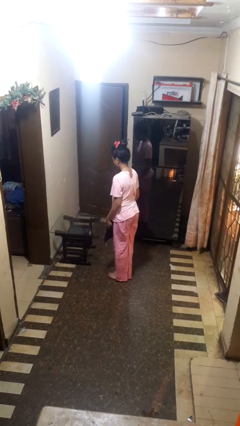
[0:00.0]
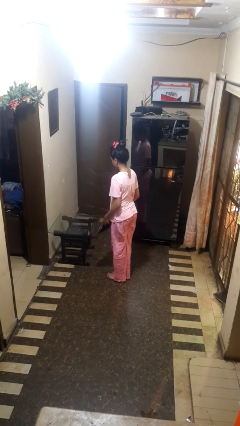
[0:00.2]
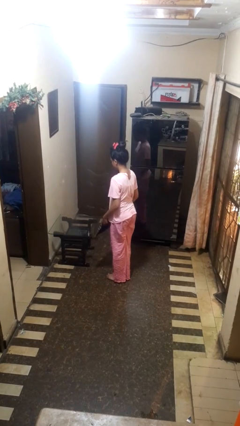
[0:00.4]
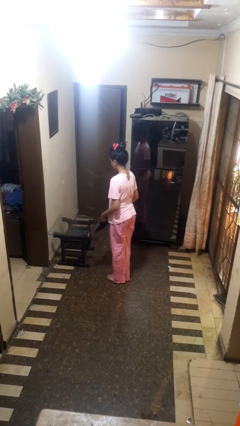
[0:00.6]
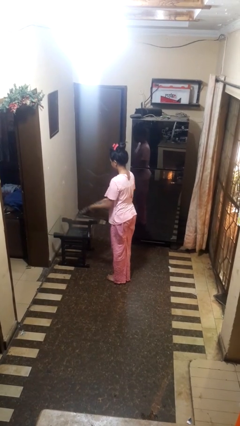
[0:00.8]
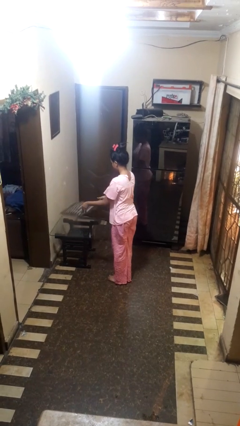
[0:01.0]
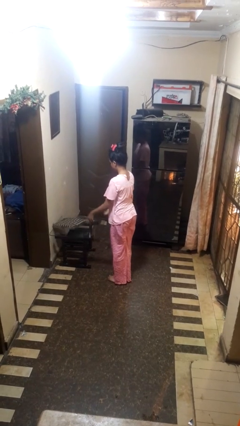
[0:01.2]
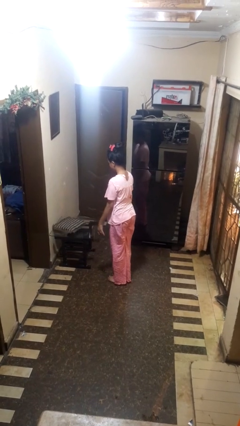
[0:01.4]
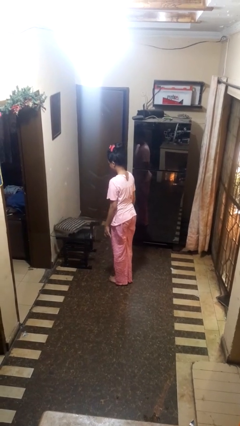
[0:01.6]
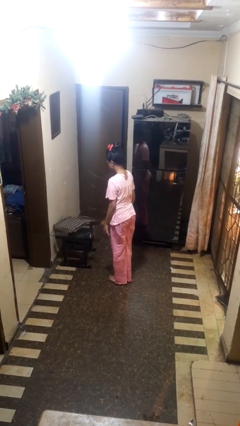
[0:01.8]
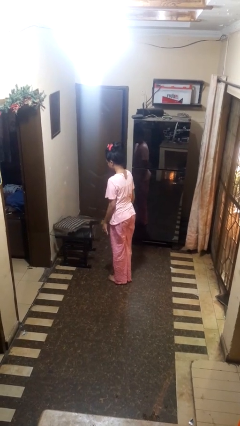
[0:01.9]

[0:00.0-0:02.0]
person throws object on table

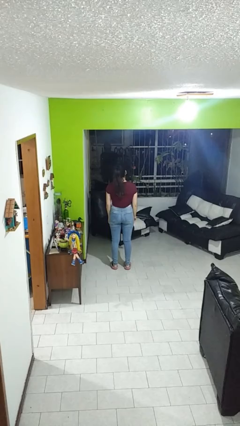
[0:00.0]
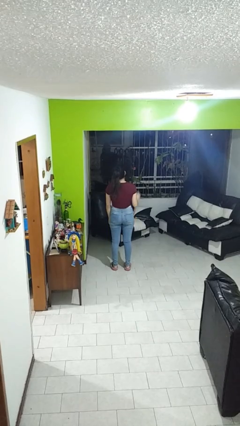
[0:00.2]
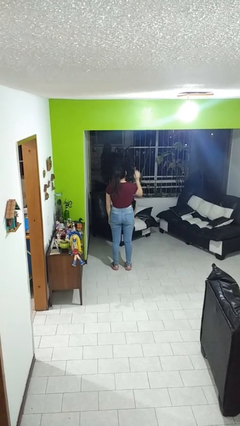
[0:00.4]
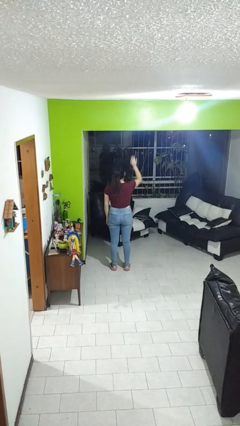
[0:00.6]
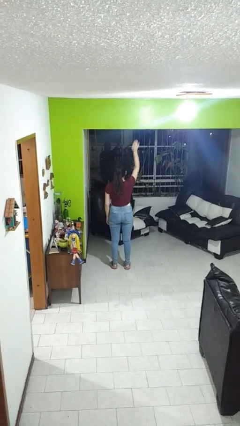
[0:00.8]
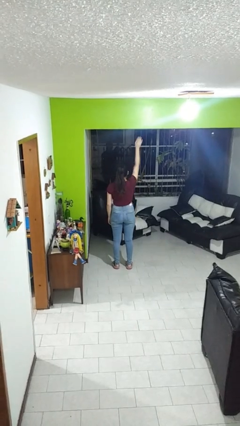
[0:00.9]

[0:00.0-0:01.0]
person gestures raise hand

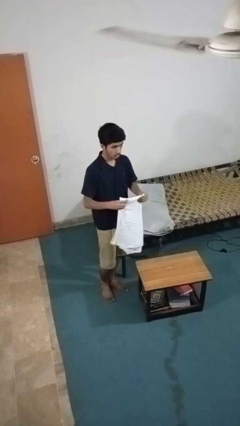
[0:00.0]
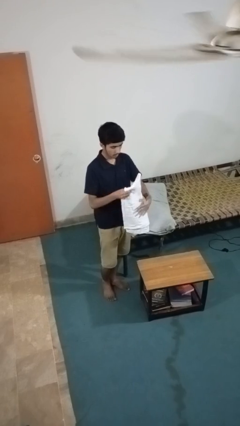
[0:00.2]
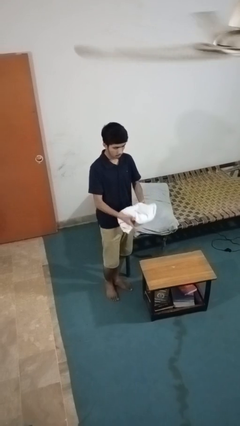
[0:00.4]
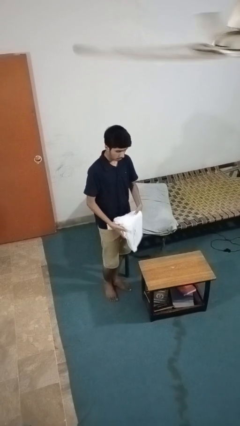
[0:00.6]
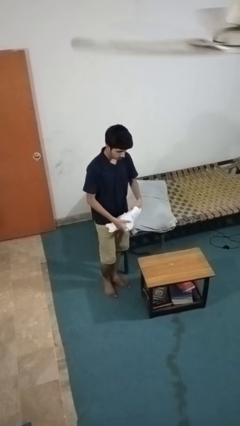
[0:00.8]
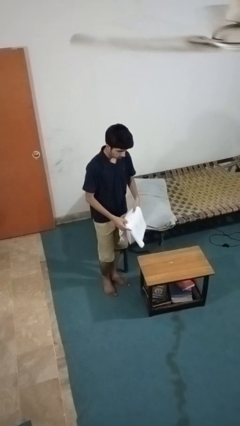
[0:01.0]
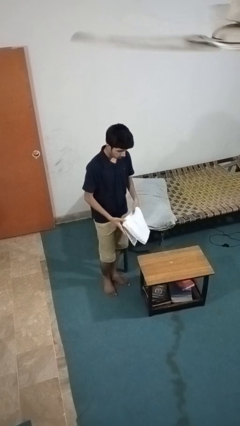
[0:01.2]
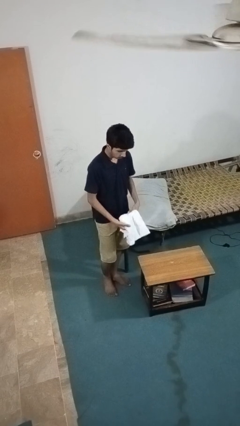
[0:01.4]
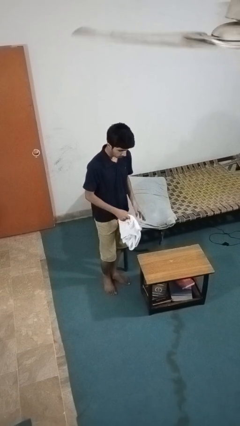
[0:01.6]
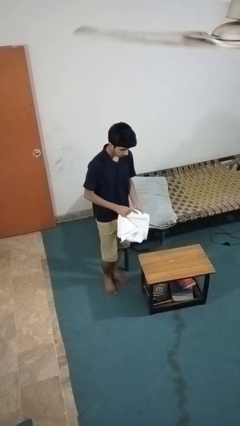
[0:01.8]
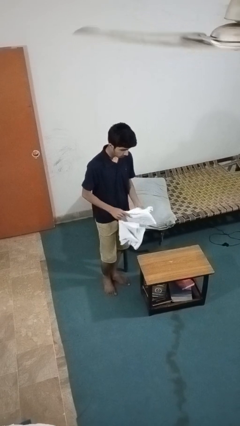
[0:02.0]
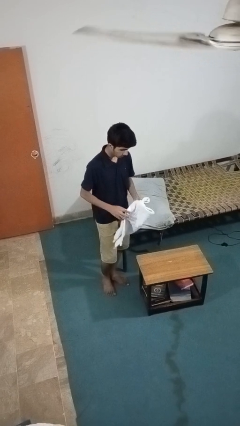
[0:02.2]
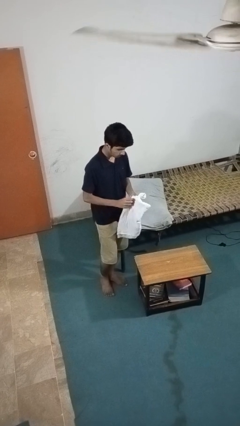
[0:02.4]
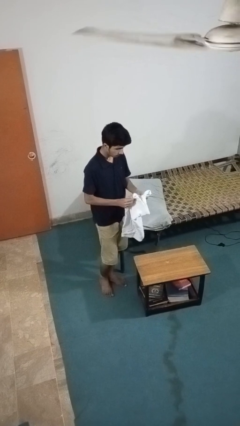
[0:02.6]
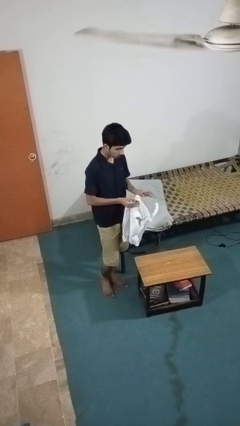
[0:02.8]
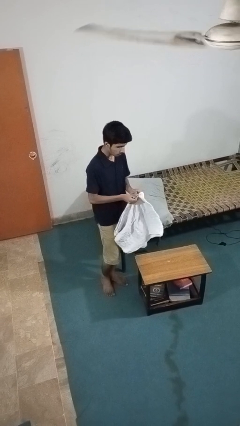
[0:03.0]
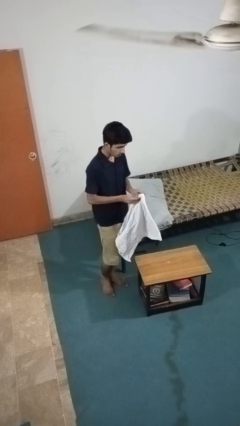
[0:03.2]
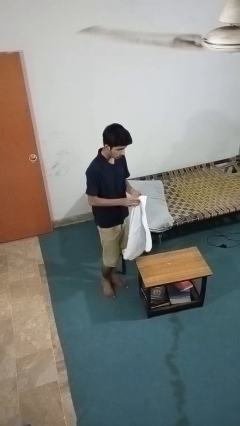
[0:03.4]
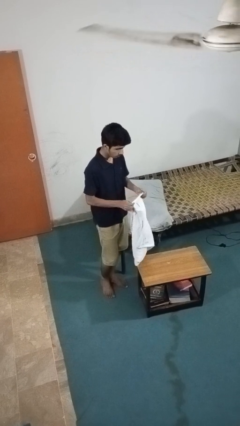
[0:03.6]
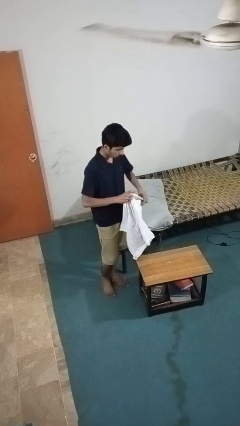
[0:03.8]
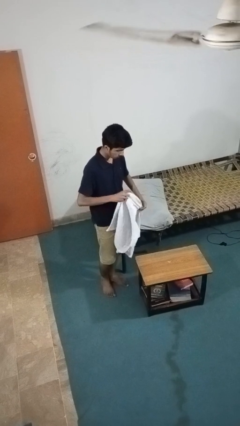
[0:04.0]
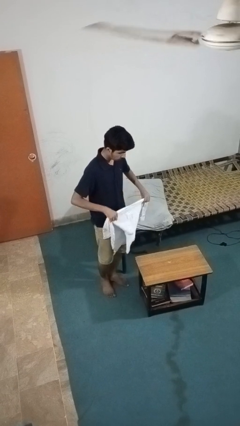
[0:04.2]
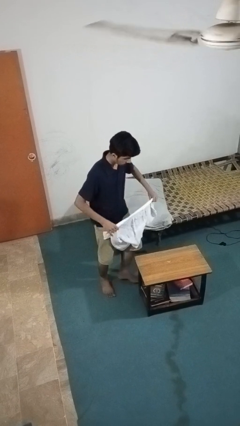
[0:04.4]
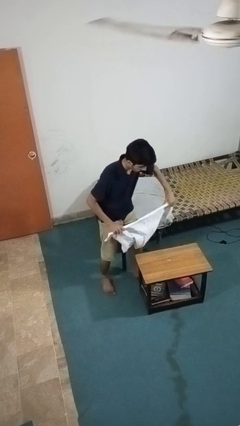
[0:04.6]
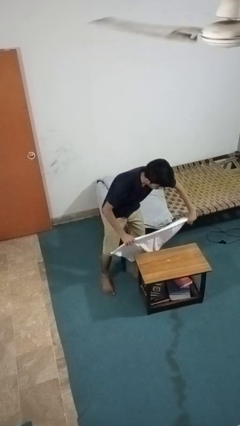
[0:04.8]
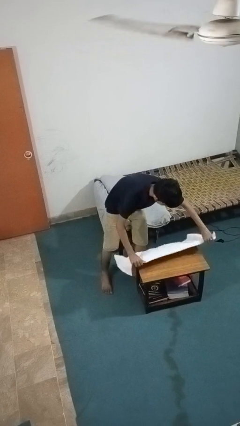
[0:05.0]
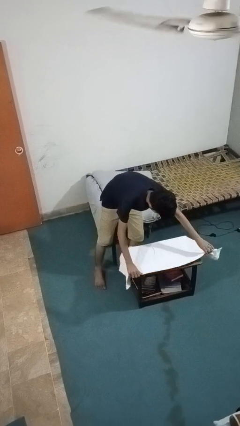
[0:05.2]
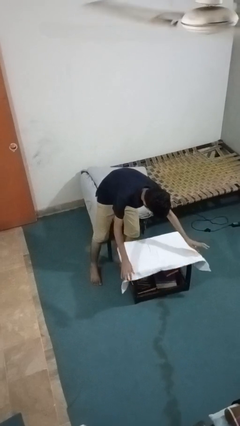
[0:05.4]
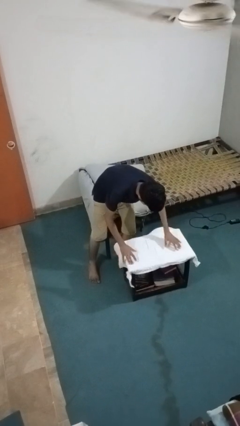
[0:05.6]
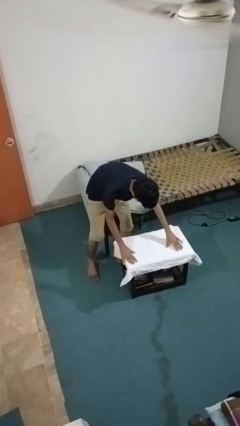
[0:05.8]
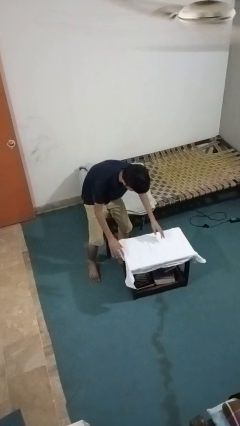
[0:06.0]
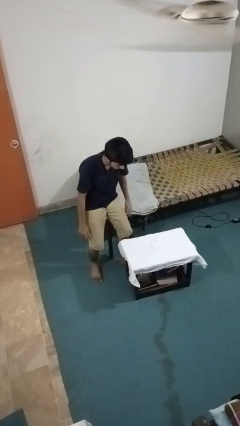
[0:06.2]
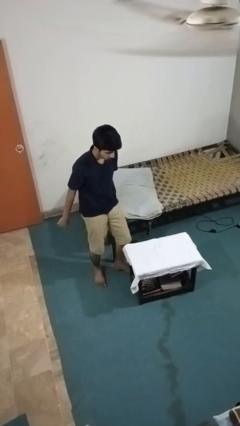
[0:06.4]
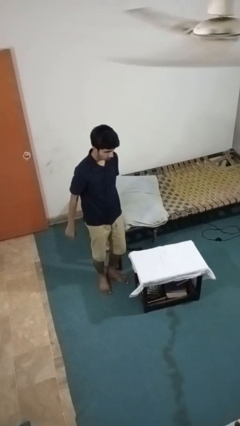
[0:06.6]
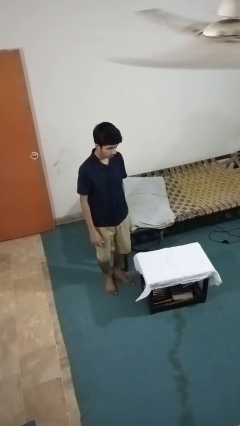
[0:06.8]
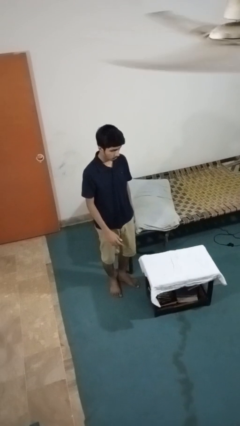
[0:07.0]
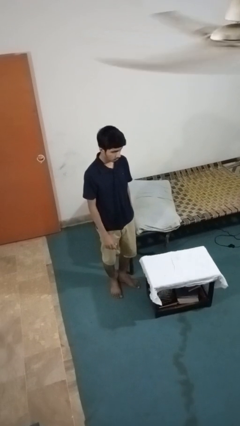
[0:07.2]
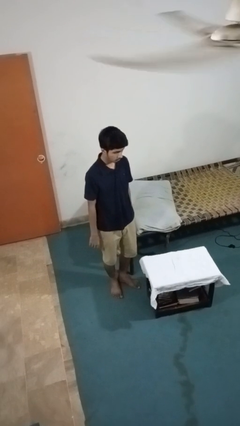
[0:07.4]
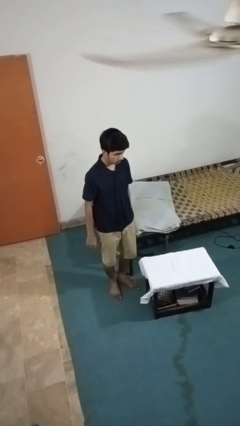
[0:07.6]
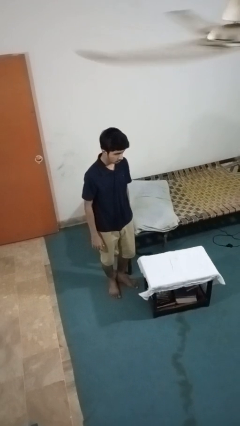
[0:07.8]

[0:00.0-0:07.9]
person spreads tablecloth

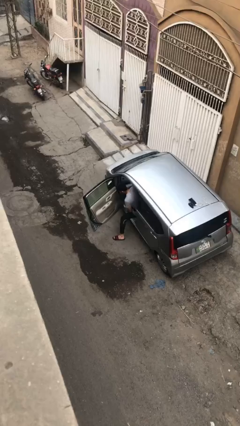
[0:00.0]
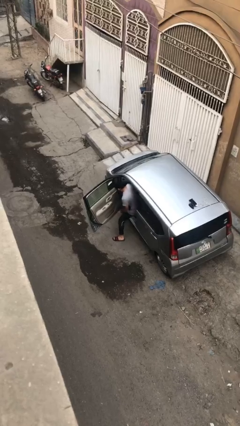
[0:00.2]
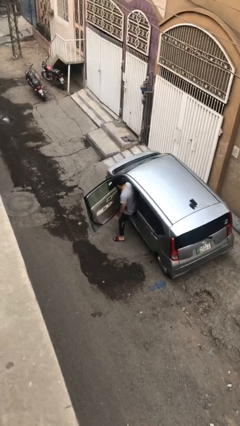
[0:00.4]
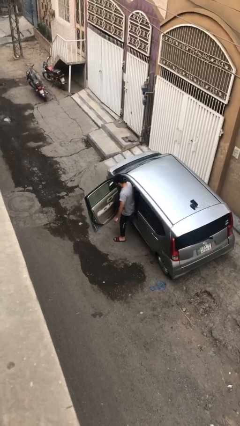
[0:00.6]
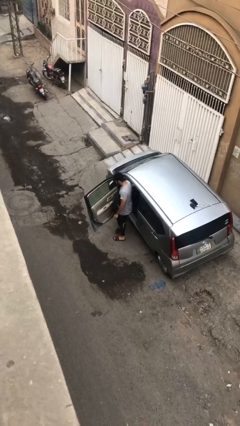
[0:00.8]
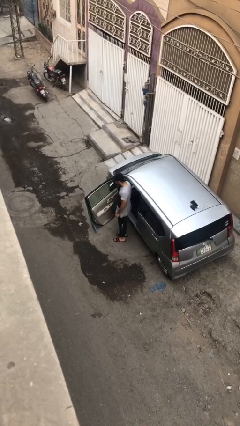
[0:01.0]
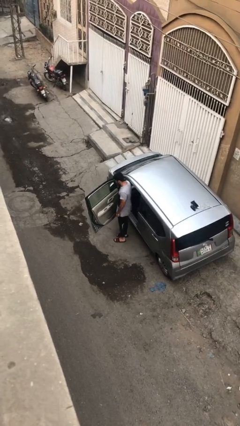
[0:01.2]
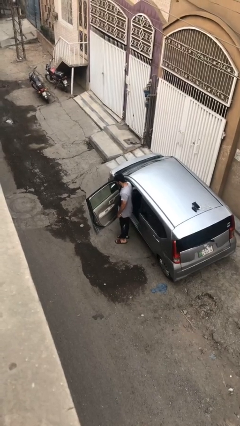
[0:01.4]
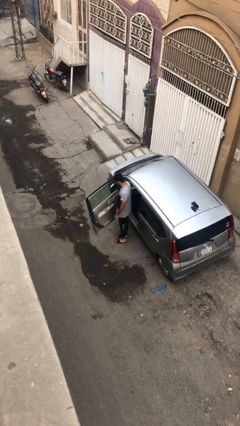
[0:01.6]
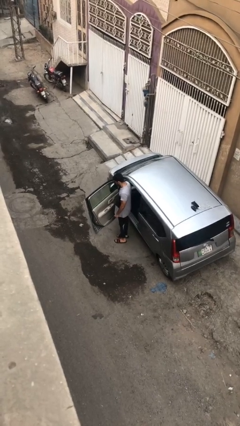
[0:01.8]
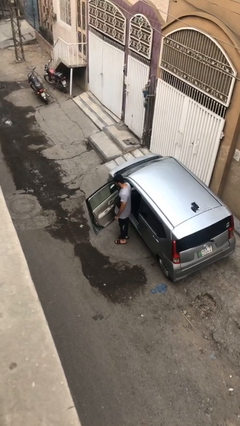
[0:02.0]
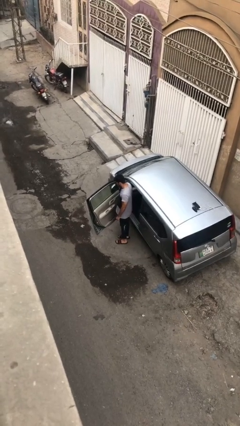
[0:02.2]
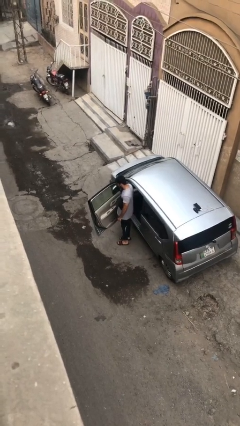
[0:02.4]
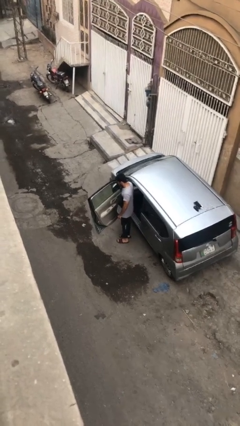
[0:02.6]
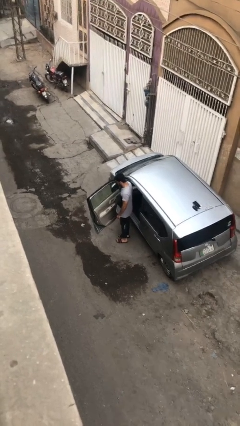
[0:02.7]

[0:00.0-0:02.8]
person exits car

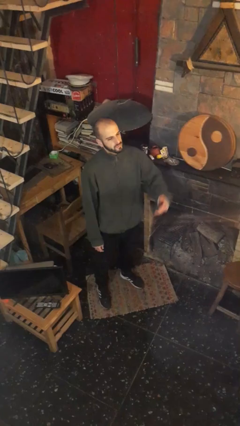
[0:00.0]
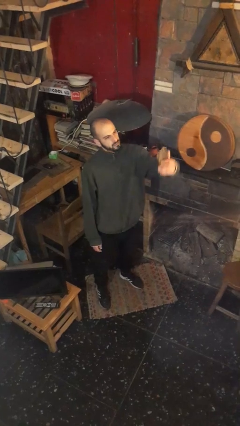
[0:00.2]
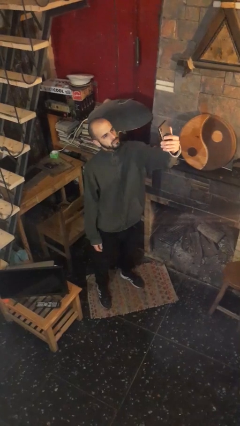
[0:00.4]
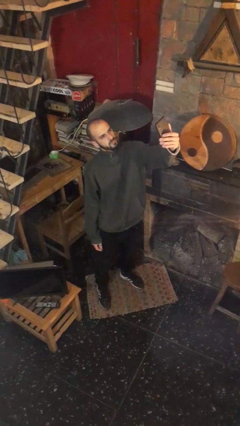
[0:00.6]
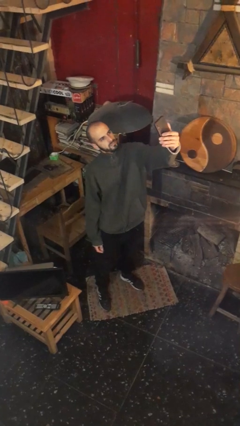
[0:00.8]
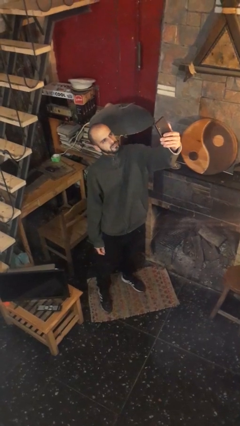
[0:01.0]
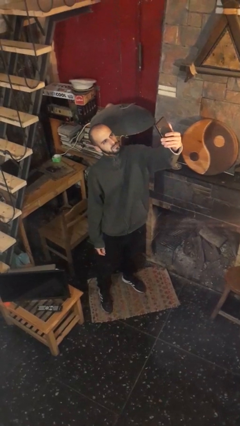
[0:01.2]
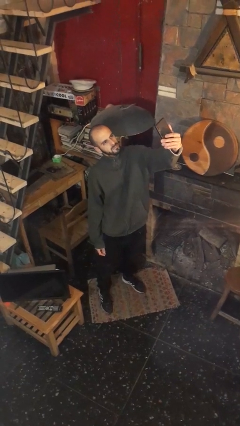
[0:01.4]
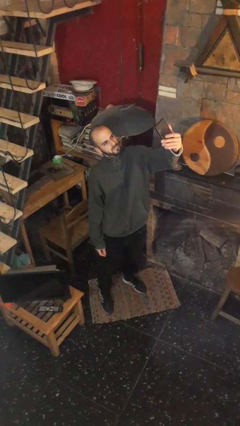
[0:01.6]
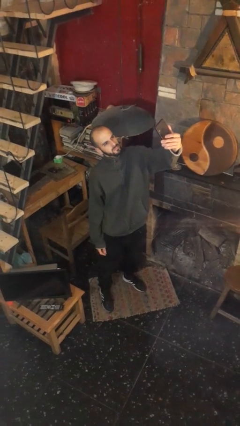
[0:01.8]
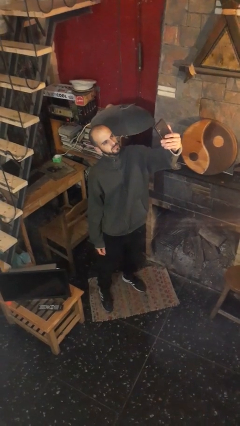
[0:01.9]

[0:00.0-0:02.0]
person takes selfie

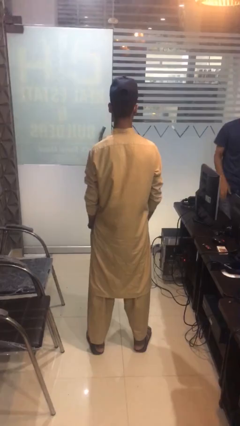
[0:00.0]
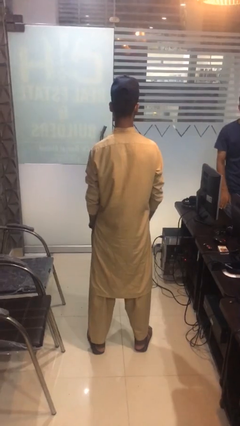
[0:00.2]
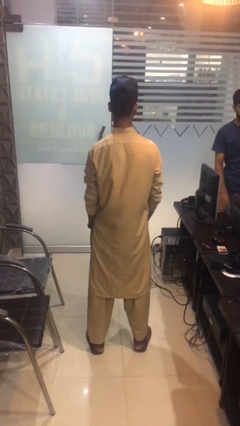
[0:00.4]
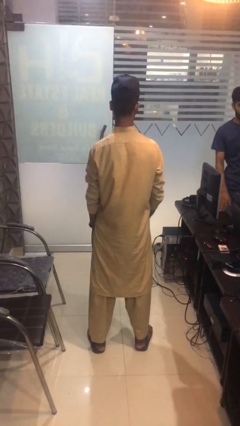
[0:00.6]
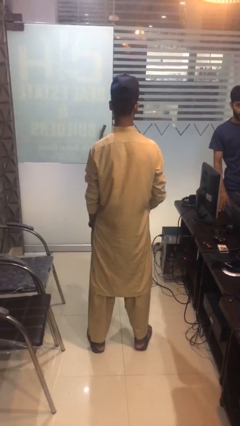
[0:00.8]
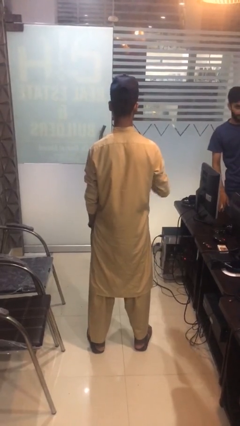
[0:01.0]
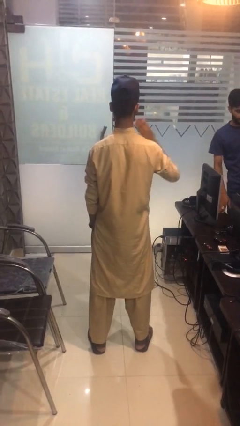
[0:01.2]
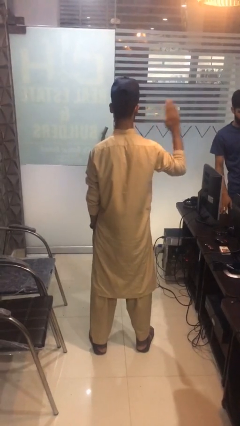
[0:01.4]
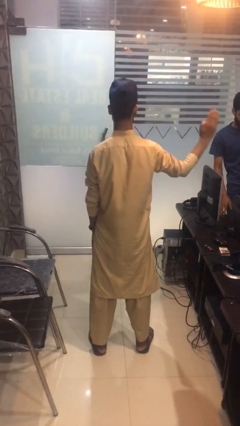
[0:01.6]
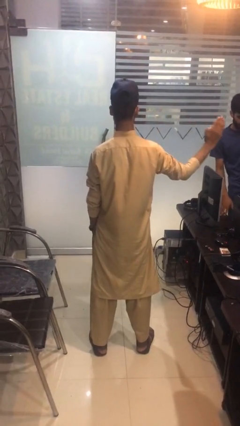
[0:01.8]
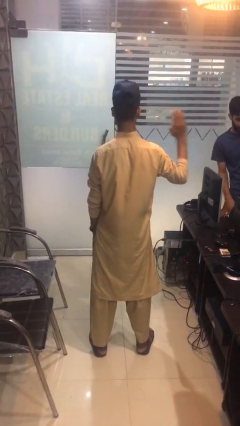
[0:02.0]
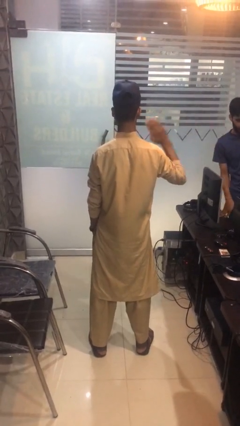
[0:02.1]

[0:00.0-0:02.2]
person gestures swipe right
